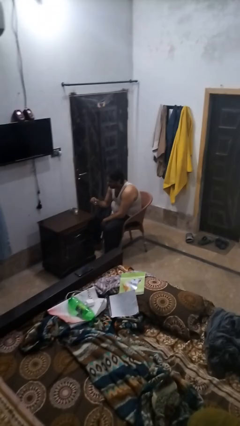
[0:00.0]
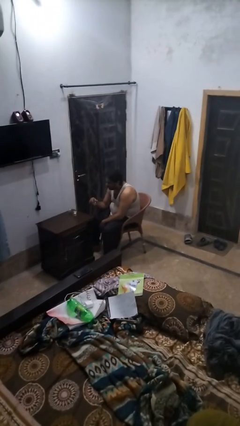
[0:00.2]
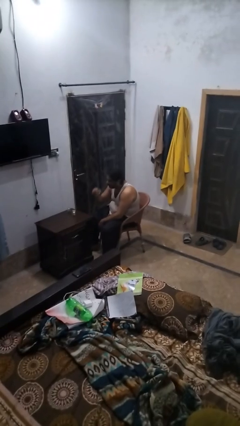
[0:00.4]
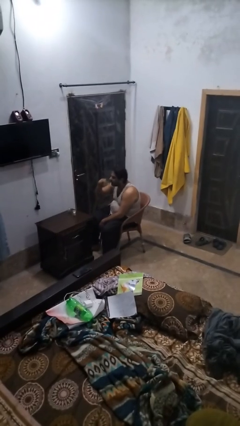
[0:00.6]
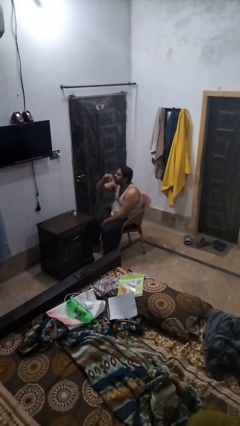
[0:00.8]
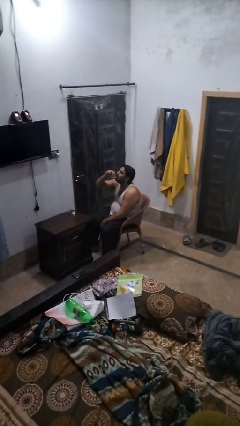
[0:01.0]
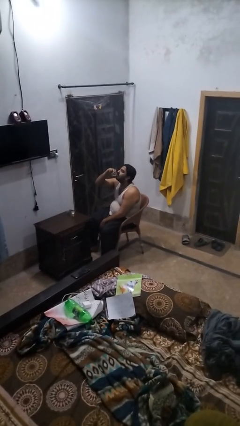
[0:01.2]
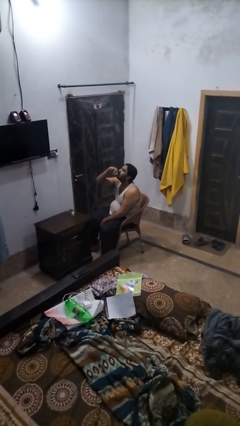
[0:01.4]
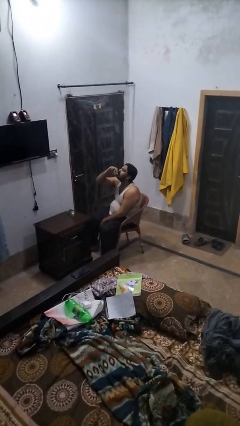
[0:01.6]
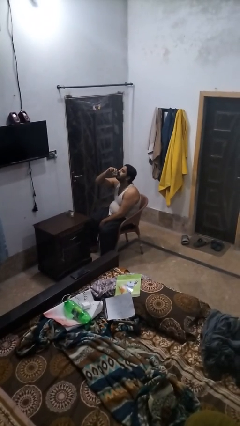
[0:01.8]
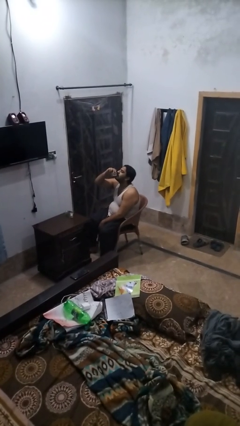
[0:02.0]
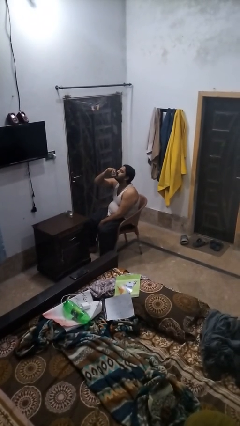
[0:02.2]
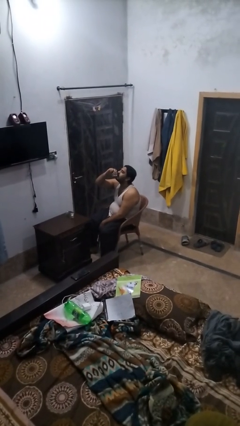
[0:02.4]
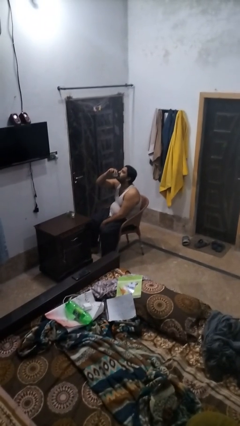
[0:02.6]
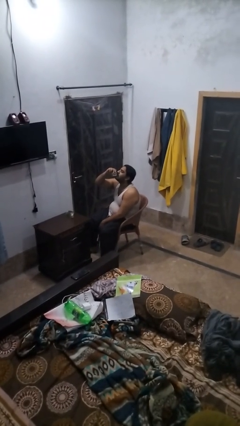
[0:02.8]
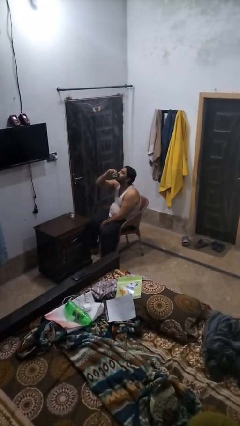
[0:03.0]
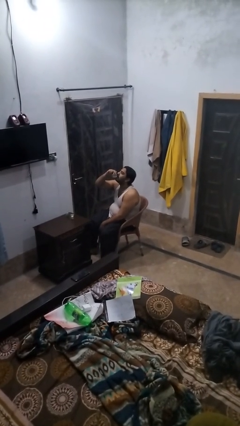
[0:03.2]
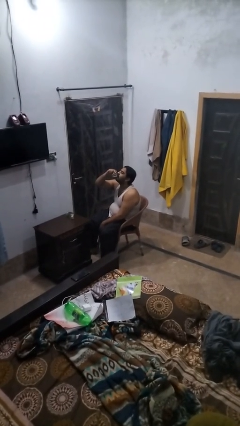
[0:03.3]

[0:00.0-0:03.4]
person drinks from shotglass

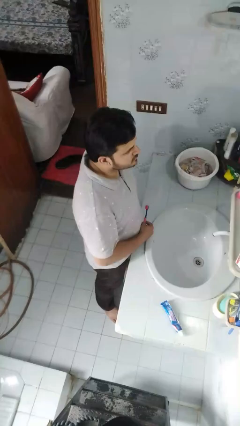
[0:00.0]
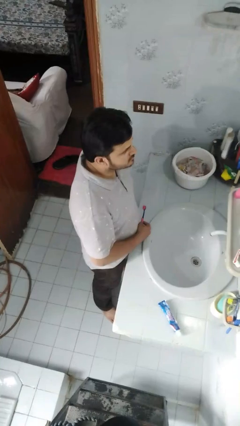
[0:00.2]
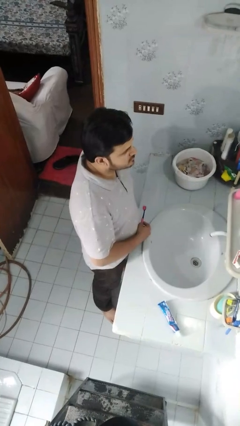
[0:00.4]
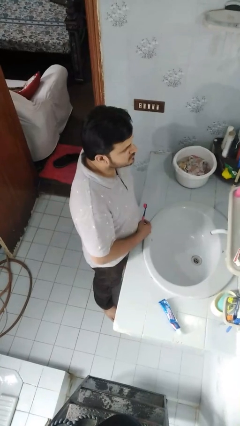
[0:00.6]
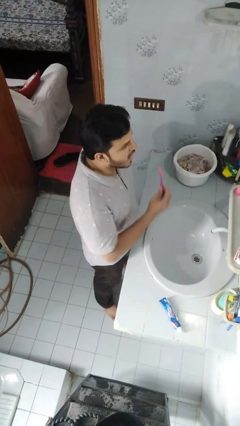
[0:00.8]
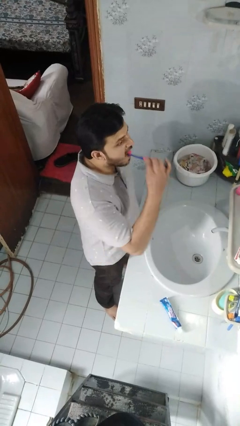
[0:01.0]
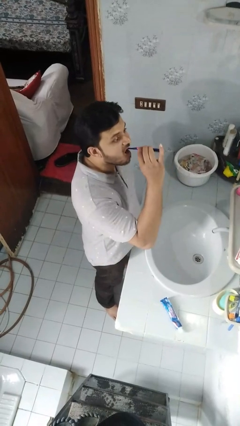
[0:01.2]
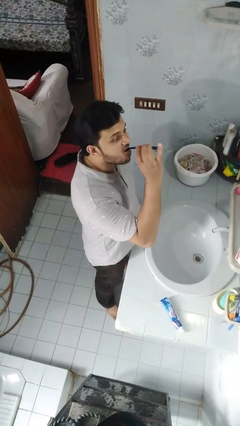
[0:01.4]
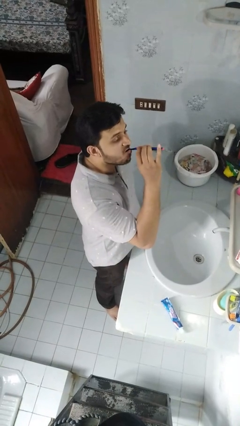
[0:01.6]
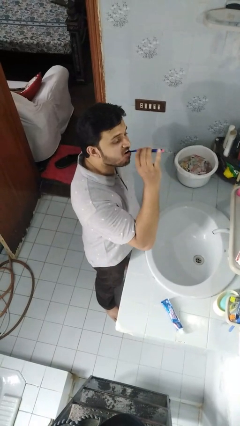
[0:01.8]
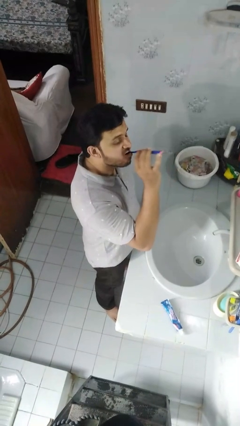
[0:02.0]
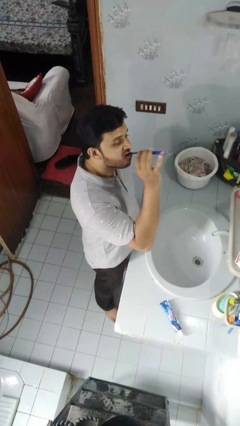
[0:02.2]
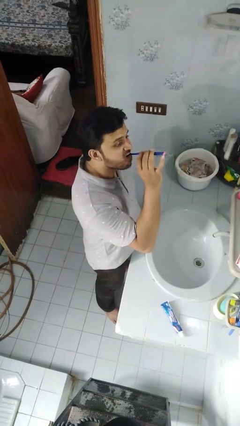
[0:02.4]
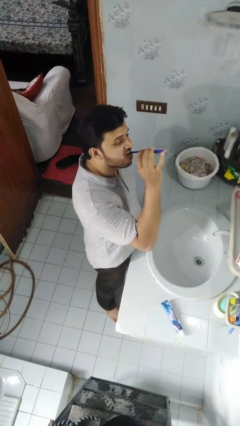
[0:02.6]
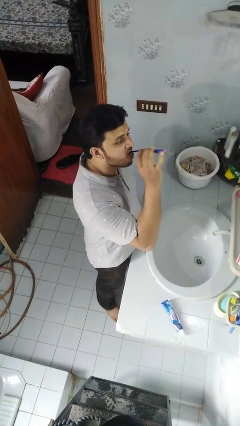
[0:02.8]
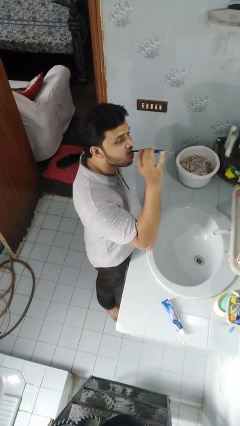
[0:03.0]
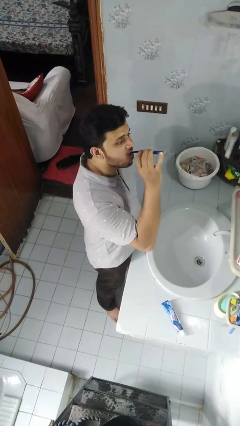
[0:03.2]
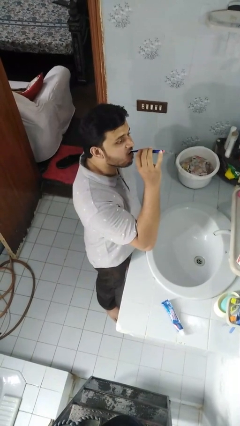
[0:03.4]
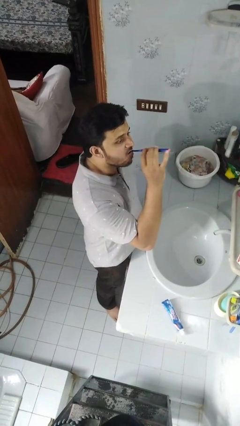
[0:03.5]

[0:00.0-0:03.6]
person brushes teeth

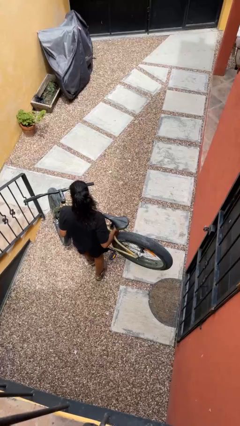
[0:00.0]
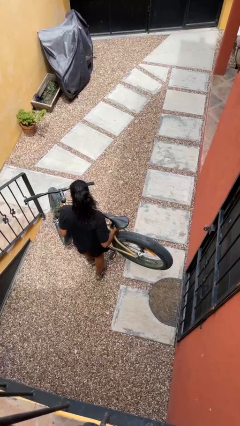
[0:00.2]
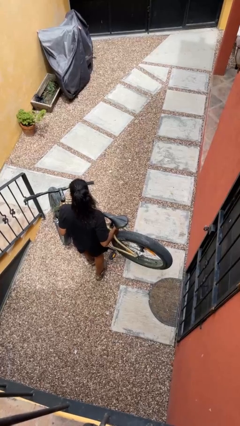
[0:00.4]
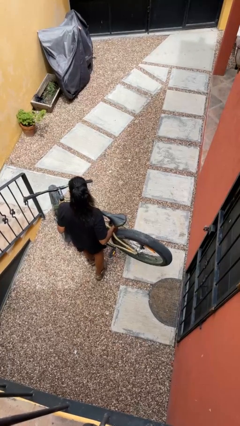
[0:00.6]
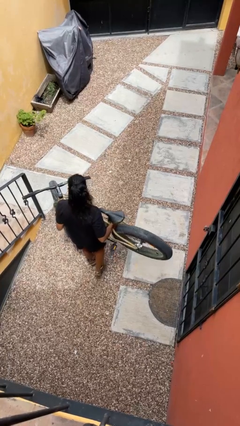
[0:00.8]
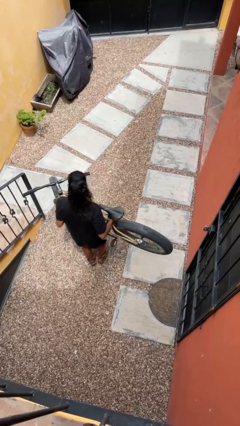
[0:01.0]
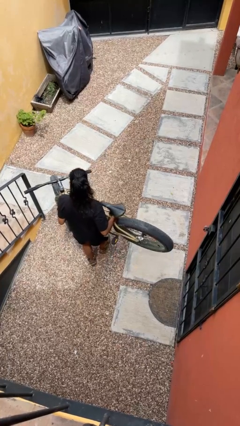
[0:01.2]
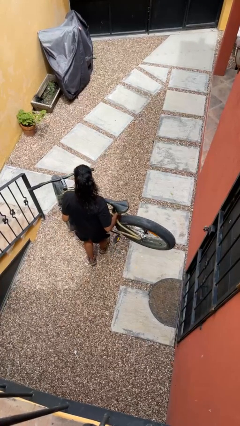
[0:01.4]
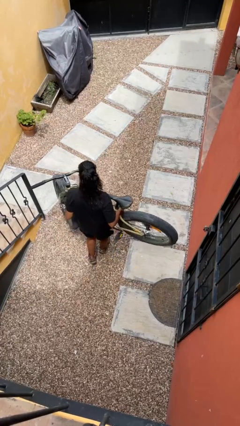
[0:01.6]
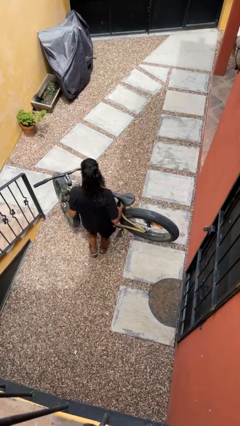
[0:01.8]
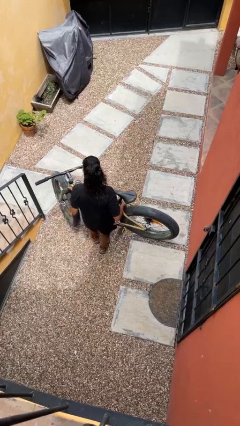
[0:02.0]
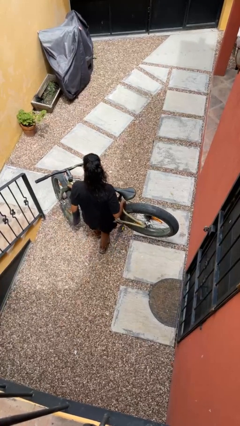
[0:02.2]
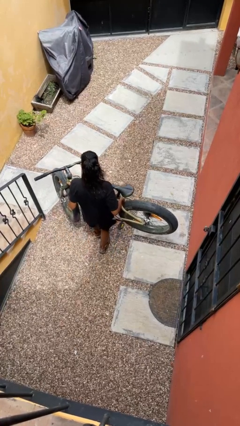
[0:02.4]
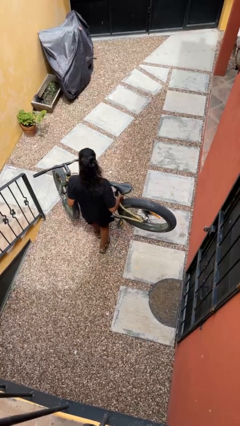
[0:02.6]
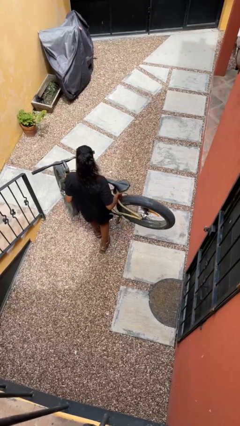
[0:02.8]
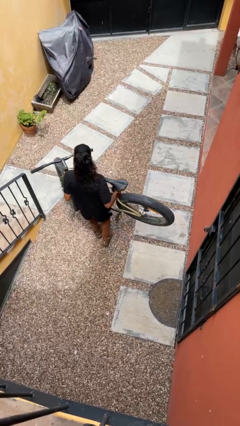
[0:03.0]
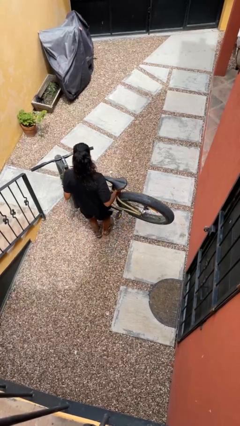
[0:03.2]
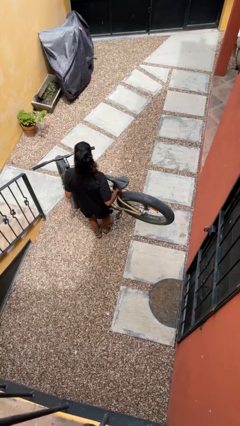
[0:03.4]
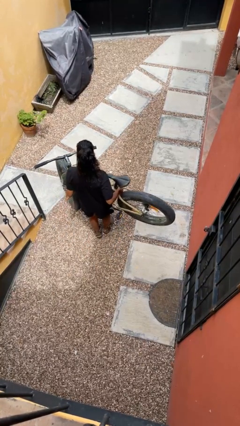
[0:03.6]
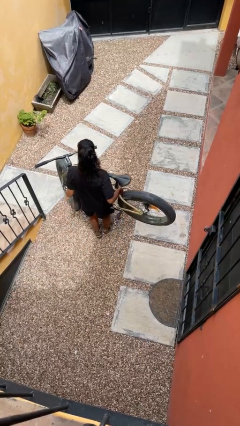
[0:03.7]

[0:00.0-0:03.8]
person carries bicycle

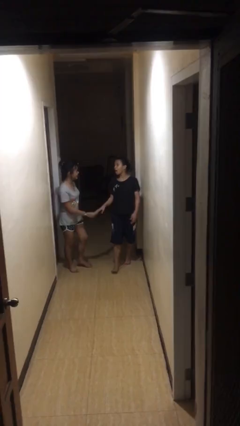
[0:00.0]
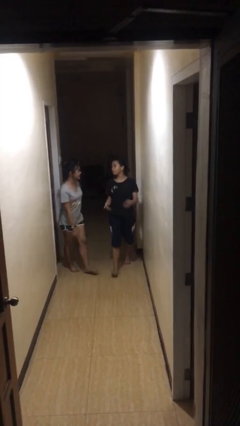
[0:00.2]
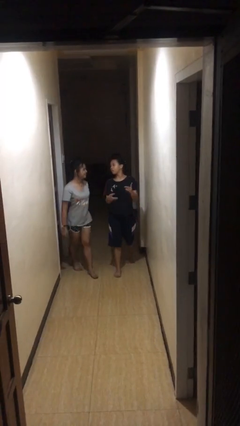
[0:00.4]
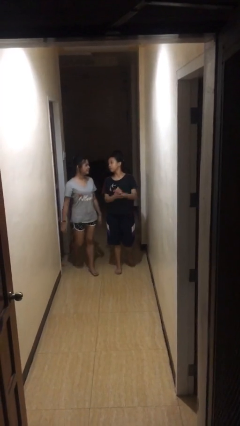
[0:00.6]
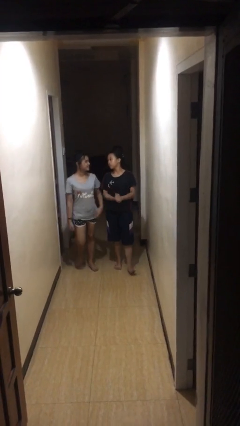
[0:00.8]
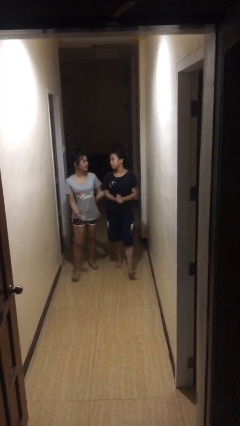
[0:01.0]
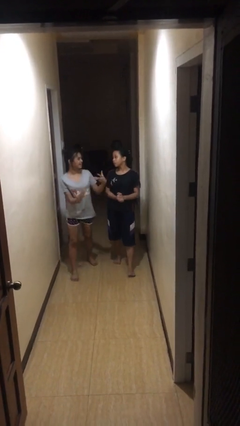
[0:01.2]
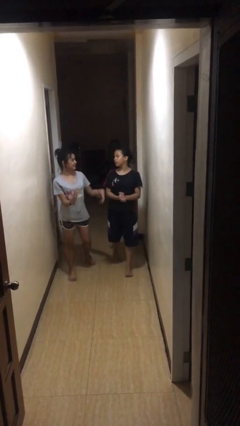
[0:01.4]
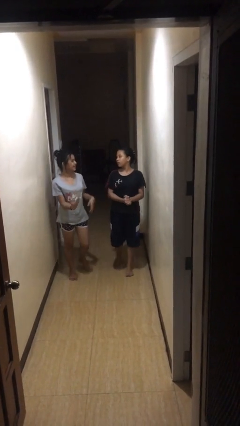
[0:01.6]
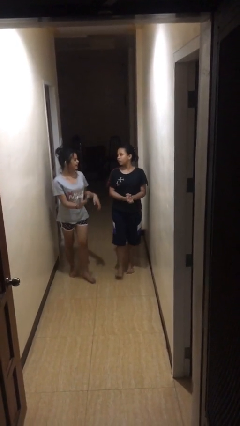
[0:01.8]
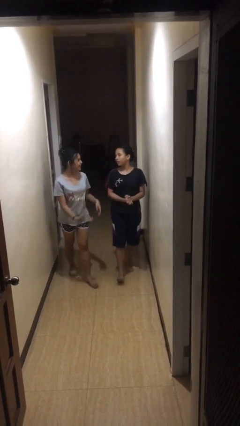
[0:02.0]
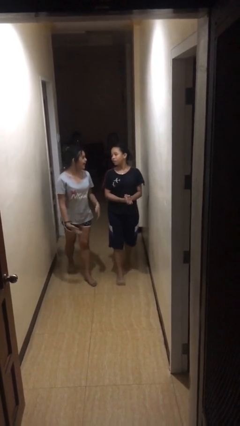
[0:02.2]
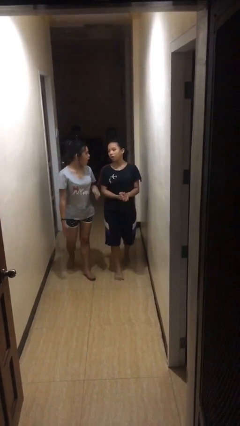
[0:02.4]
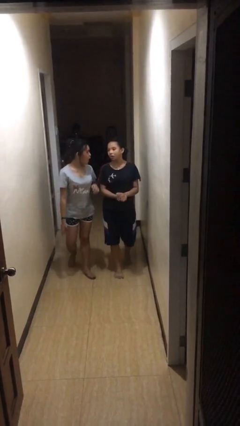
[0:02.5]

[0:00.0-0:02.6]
person talks to person

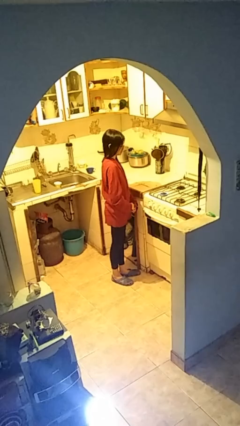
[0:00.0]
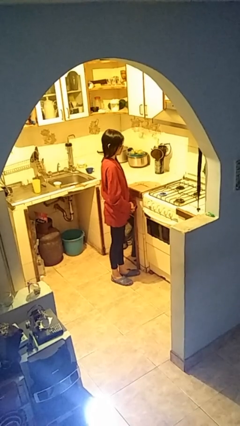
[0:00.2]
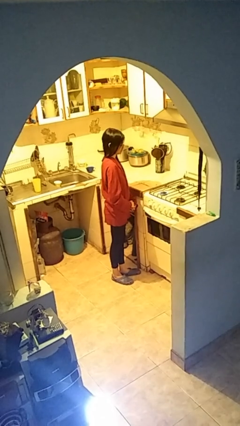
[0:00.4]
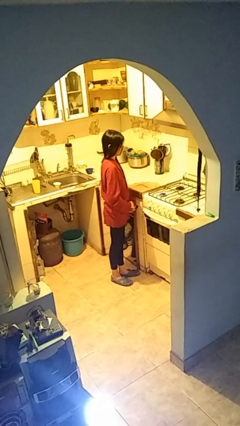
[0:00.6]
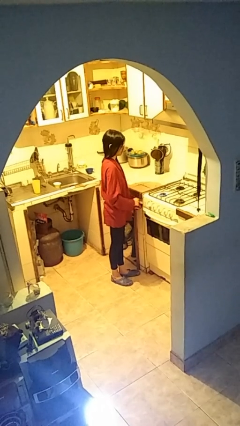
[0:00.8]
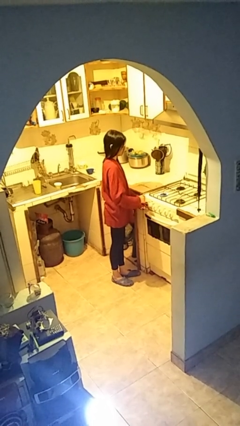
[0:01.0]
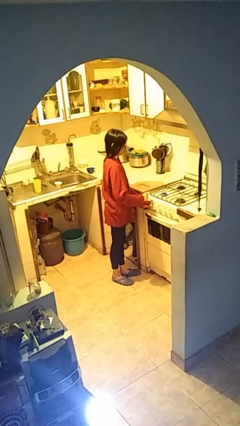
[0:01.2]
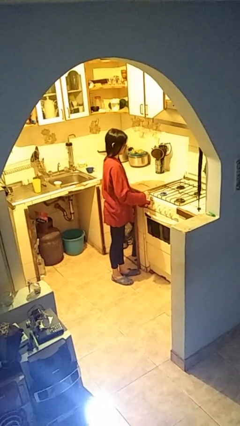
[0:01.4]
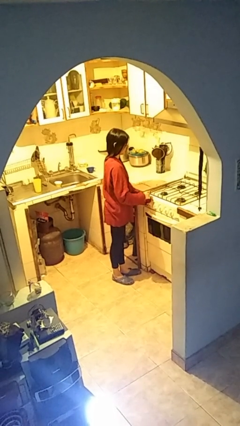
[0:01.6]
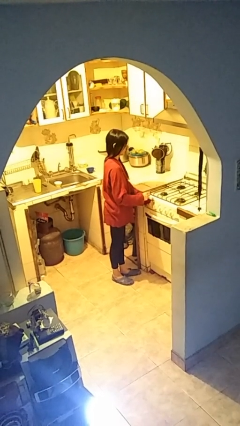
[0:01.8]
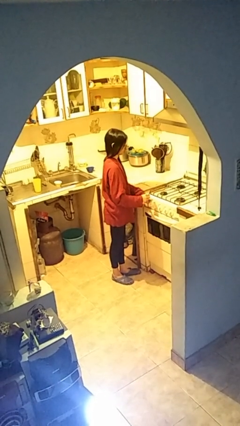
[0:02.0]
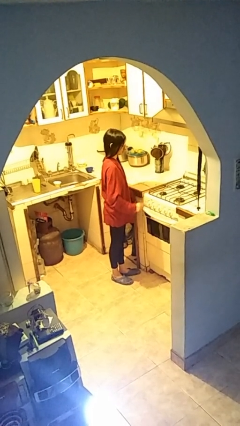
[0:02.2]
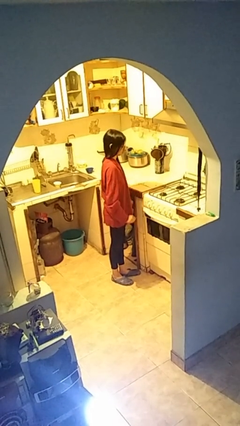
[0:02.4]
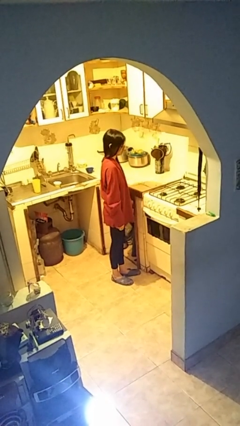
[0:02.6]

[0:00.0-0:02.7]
person turns off stovetop

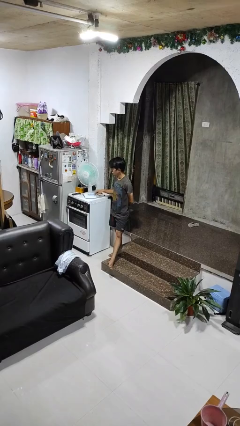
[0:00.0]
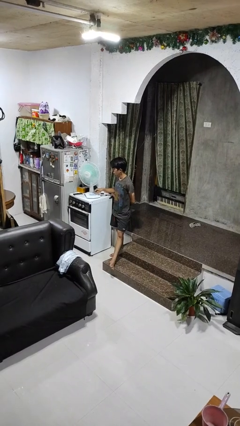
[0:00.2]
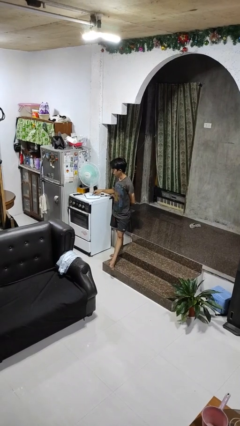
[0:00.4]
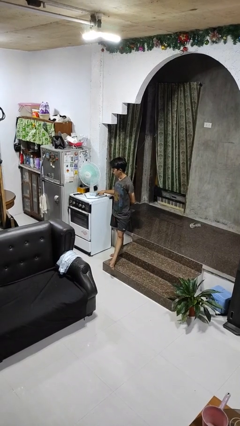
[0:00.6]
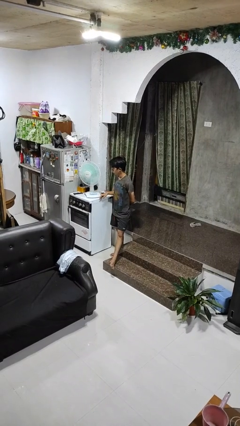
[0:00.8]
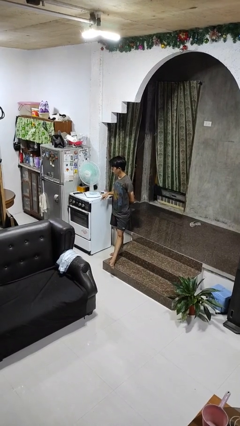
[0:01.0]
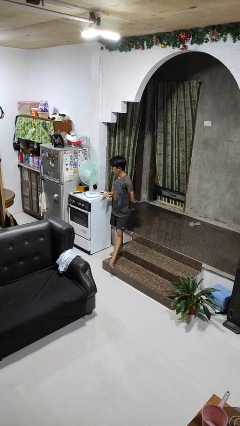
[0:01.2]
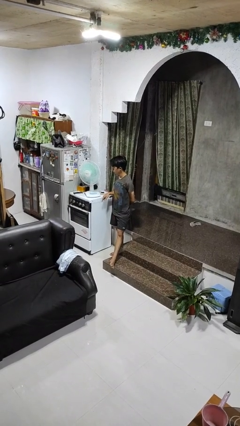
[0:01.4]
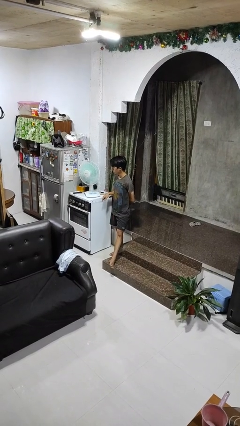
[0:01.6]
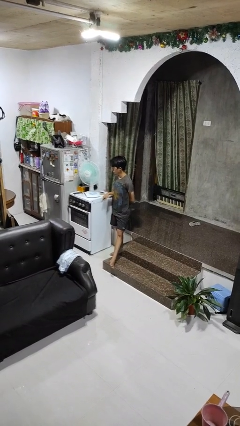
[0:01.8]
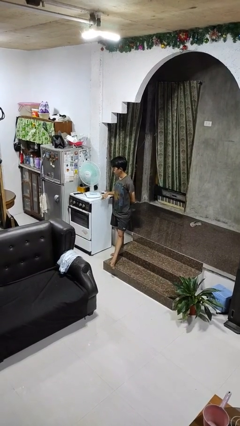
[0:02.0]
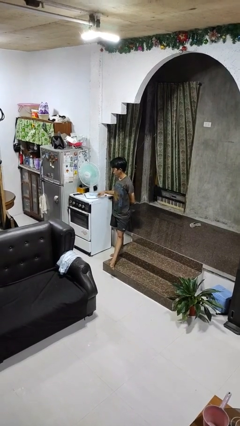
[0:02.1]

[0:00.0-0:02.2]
person turns on fan
